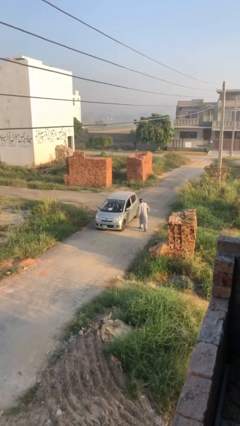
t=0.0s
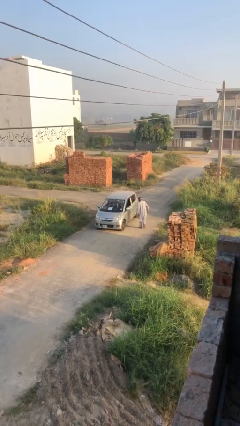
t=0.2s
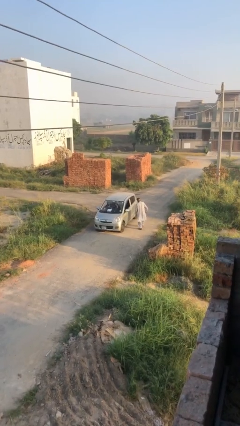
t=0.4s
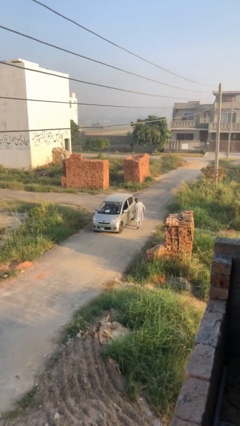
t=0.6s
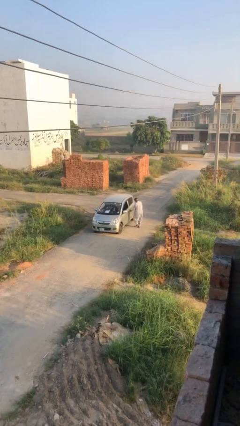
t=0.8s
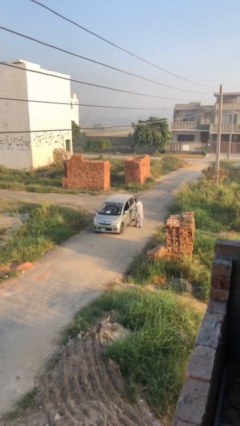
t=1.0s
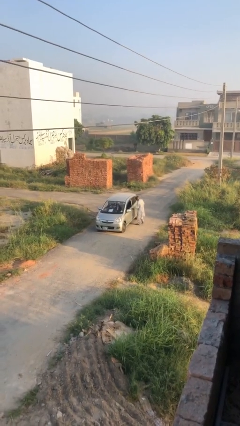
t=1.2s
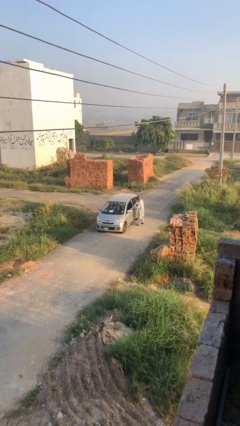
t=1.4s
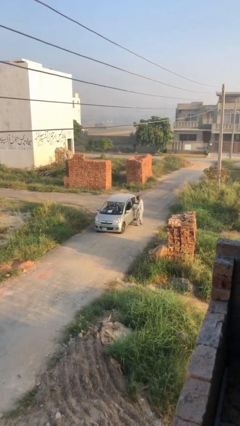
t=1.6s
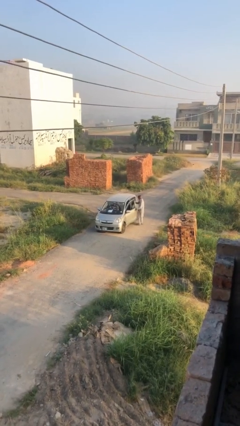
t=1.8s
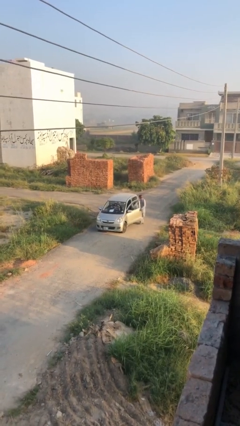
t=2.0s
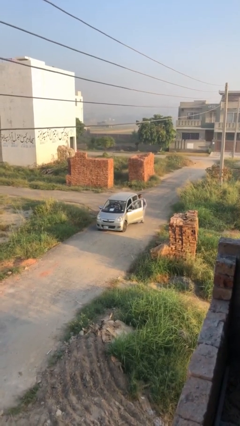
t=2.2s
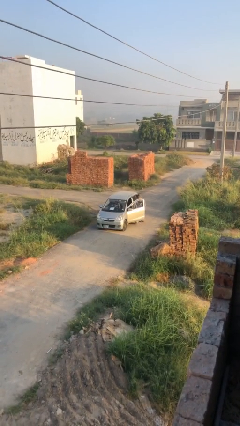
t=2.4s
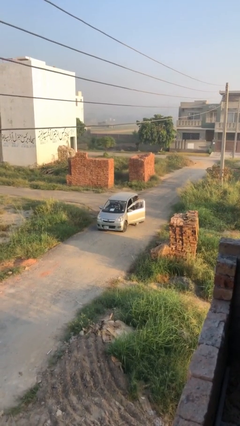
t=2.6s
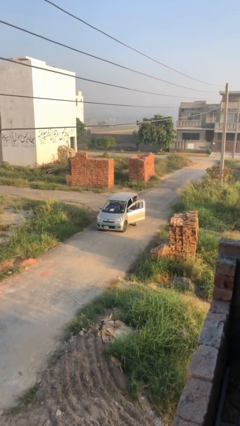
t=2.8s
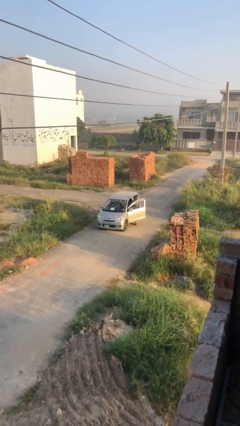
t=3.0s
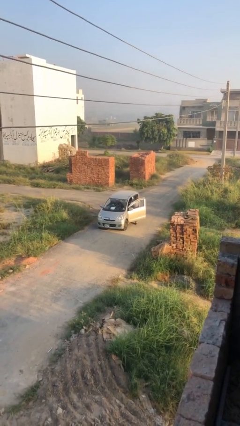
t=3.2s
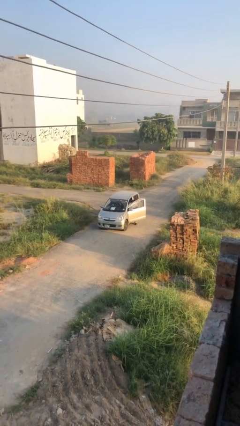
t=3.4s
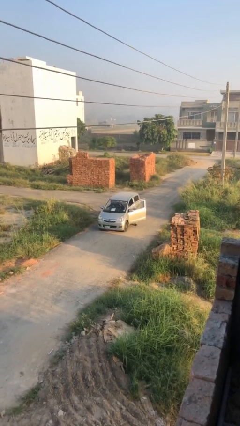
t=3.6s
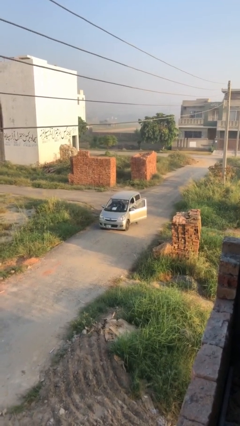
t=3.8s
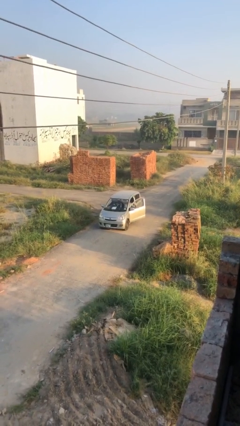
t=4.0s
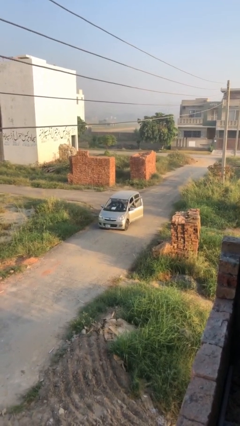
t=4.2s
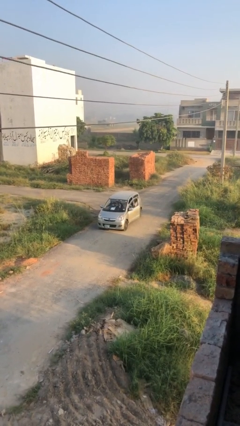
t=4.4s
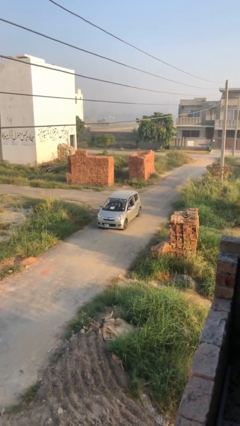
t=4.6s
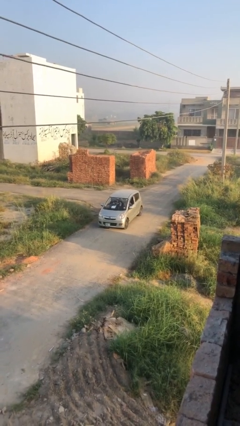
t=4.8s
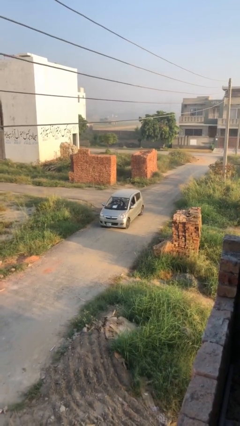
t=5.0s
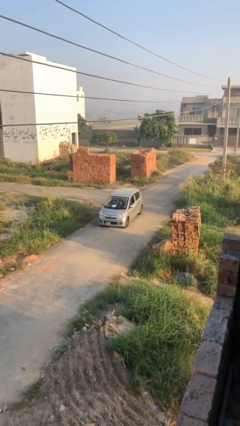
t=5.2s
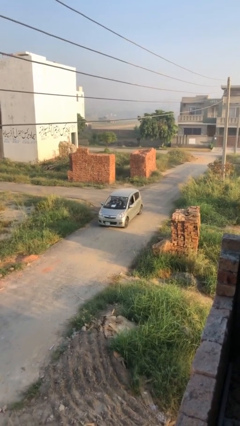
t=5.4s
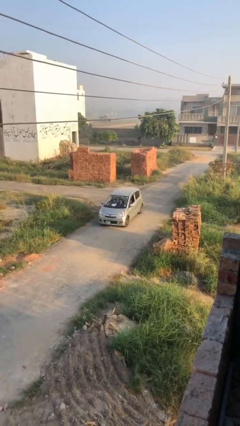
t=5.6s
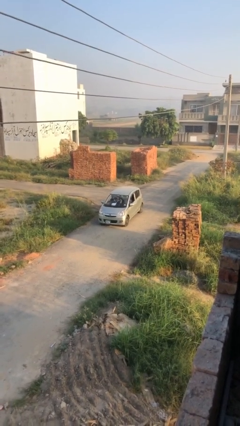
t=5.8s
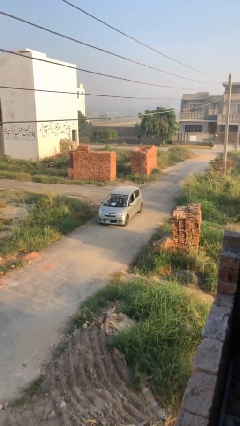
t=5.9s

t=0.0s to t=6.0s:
car picks up person

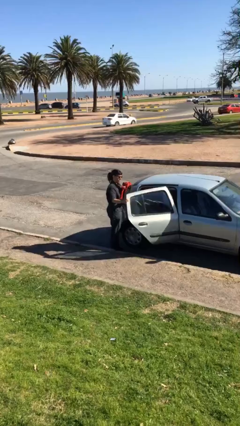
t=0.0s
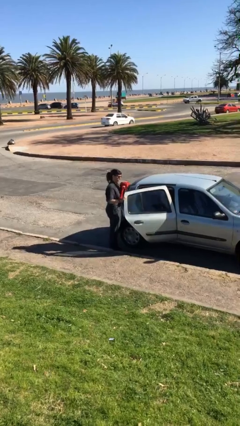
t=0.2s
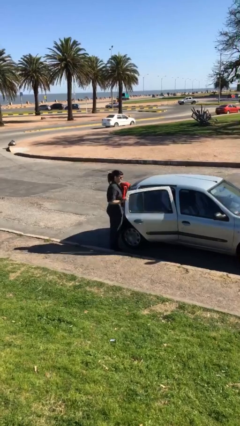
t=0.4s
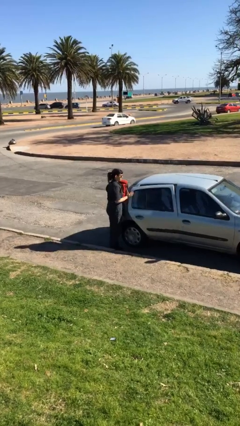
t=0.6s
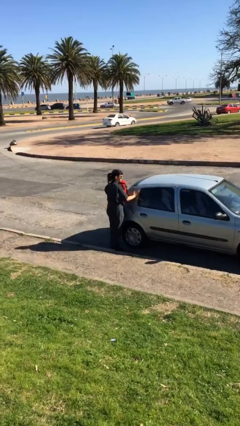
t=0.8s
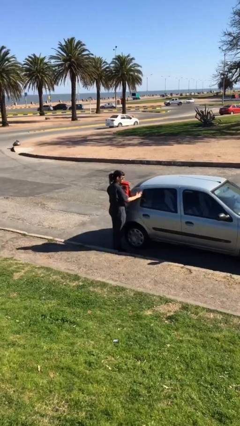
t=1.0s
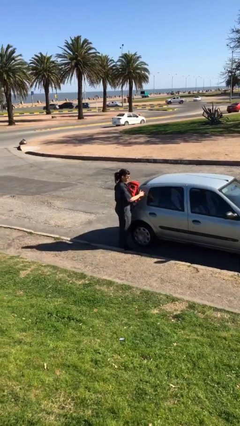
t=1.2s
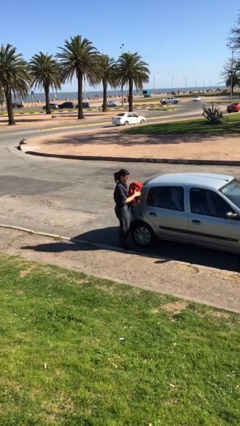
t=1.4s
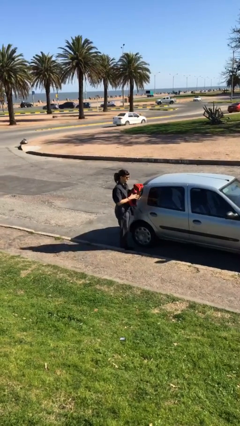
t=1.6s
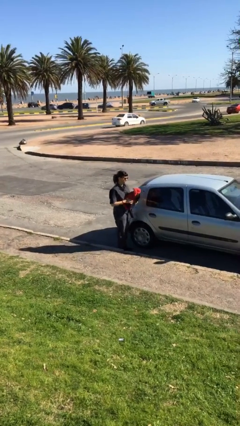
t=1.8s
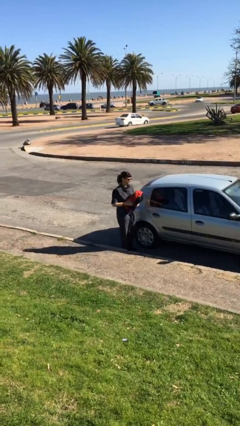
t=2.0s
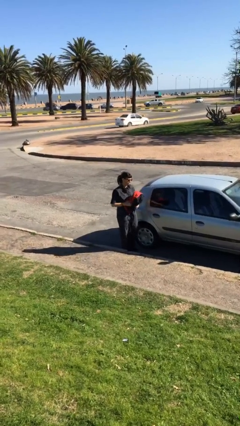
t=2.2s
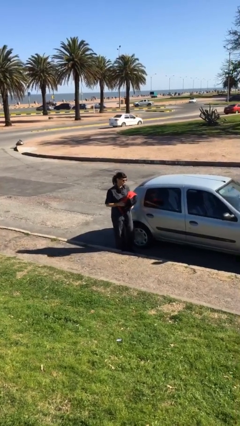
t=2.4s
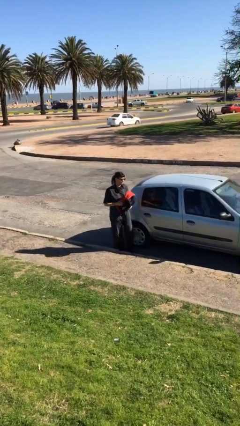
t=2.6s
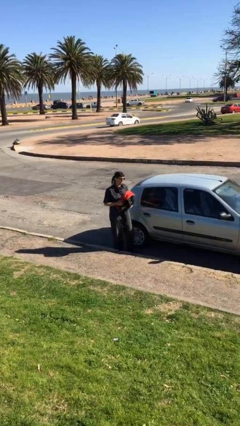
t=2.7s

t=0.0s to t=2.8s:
person closes car door

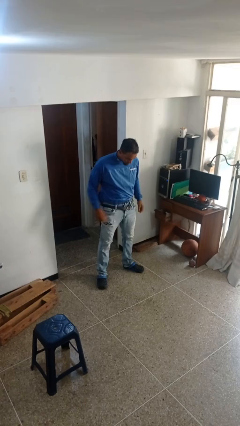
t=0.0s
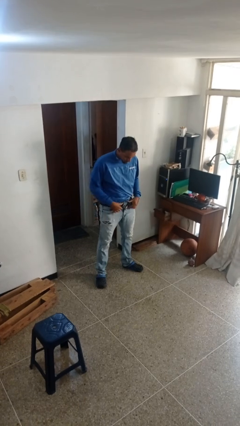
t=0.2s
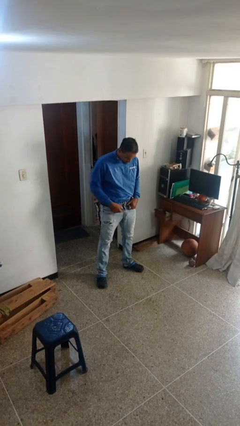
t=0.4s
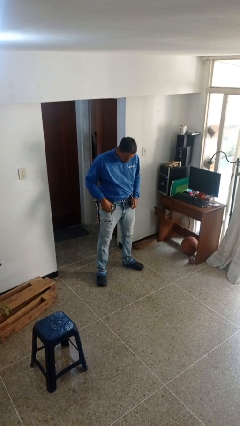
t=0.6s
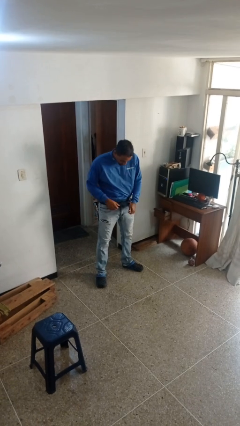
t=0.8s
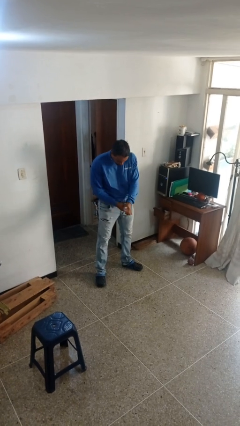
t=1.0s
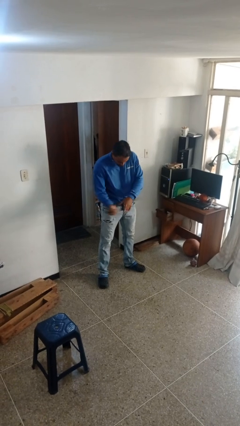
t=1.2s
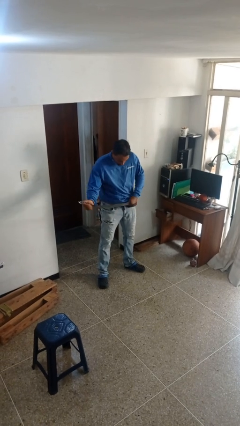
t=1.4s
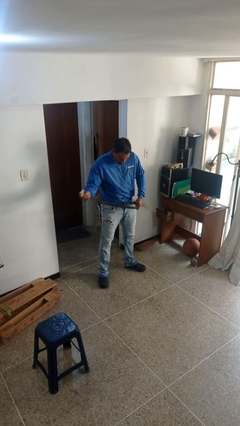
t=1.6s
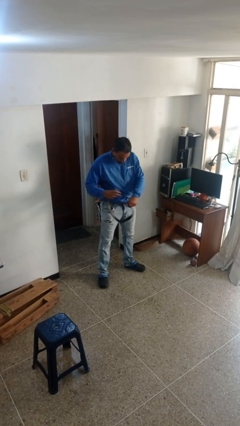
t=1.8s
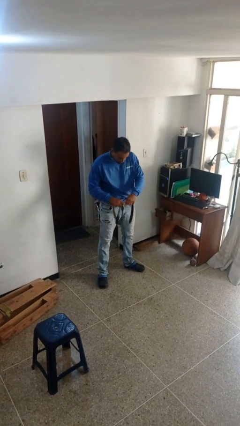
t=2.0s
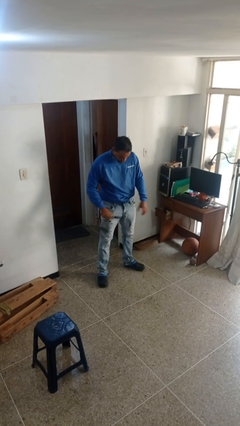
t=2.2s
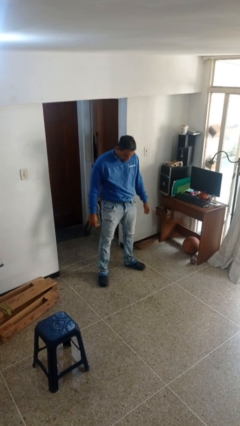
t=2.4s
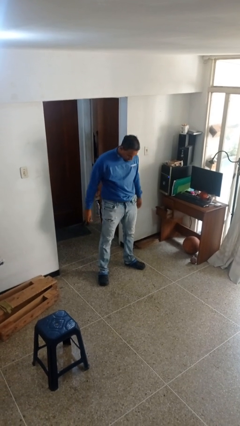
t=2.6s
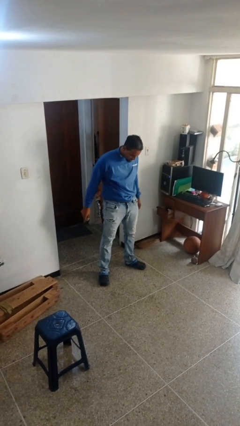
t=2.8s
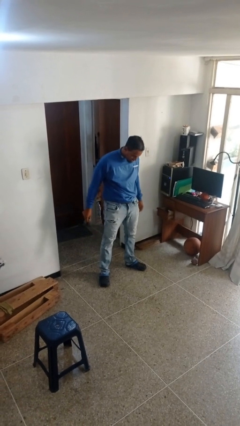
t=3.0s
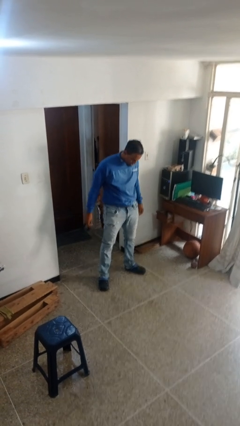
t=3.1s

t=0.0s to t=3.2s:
person takes off belt

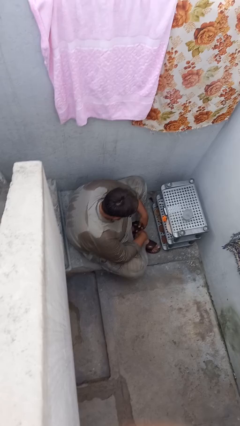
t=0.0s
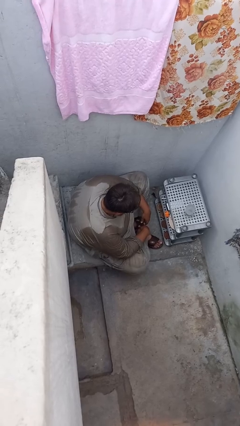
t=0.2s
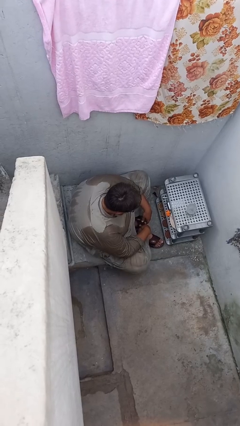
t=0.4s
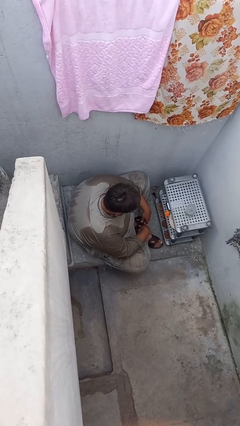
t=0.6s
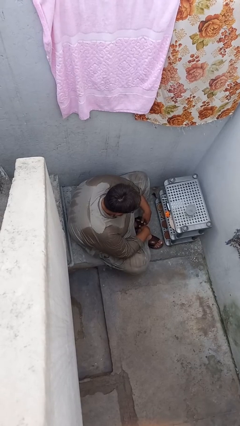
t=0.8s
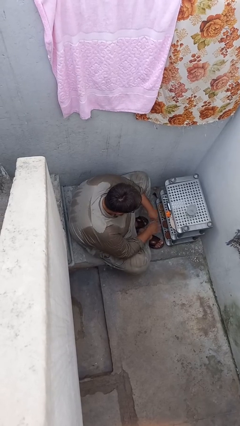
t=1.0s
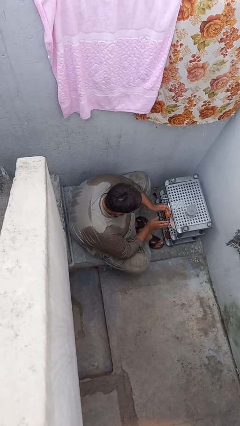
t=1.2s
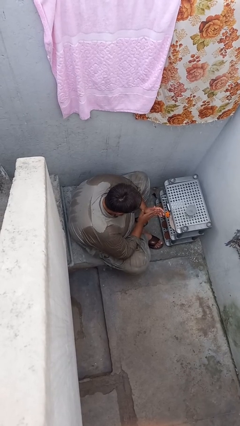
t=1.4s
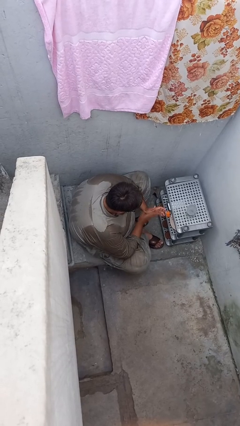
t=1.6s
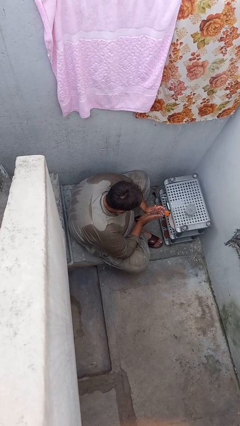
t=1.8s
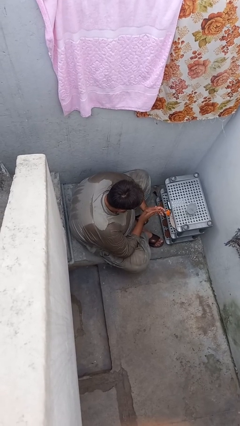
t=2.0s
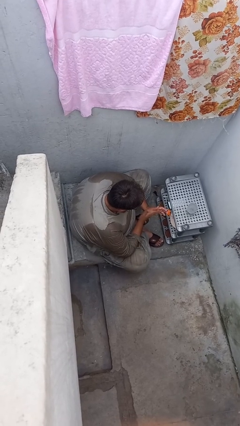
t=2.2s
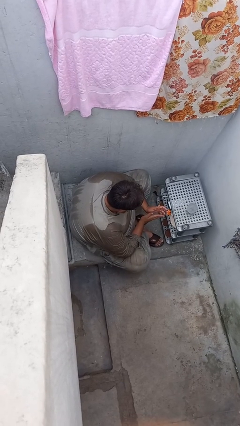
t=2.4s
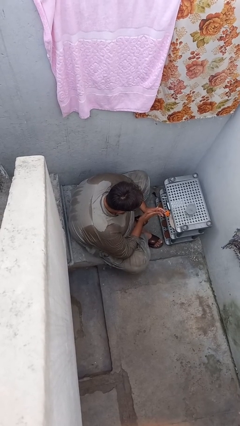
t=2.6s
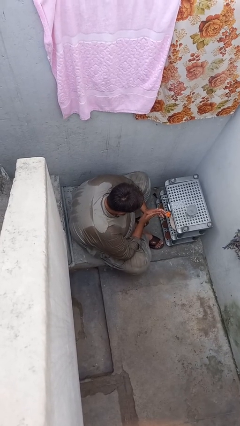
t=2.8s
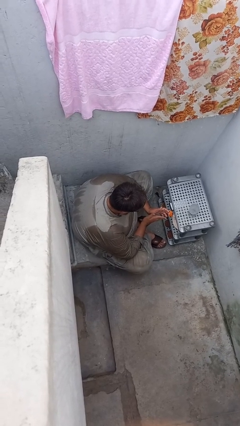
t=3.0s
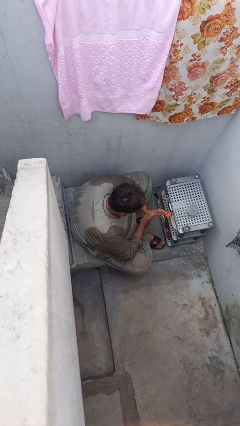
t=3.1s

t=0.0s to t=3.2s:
person claps hands

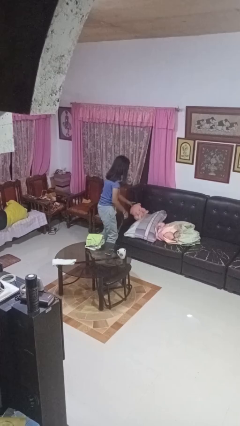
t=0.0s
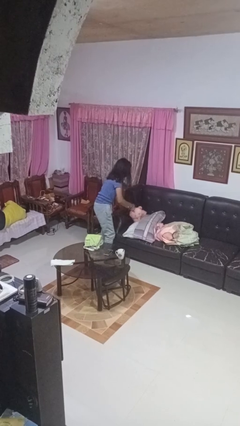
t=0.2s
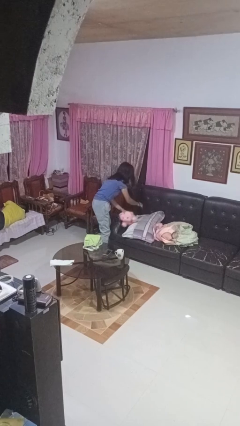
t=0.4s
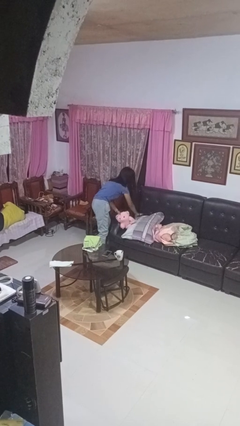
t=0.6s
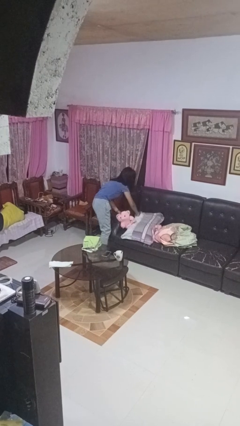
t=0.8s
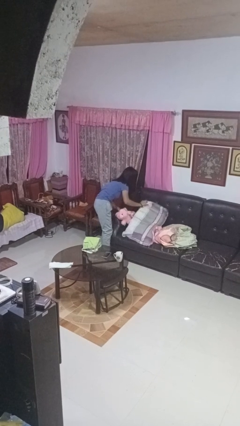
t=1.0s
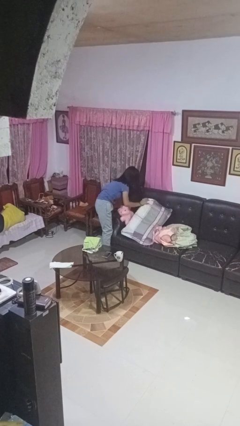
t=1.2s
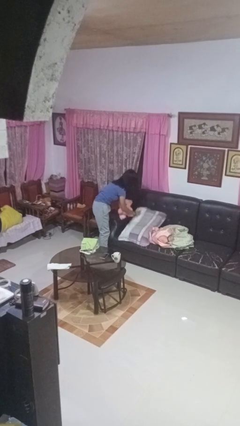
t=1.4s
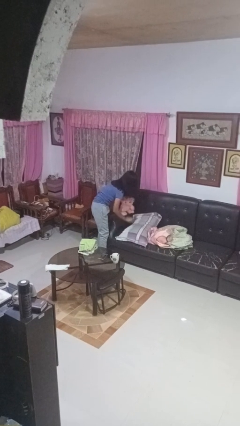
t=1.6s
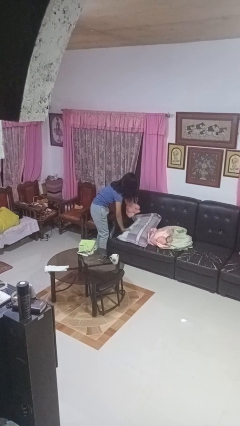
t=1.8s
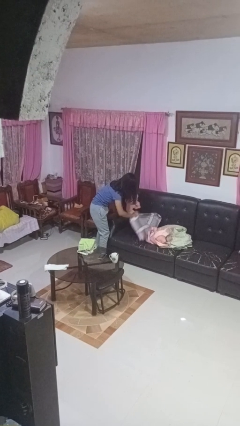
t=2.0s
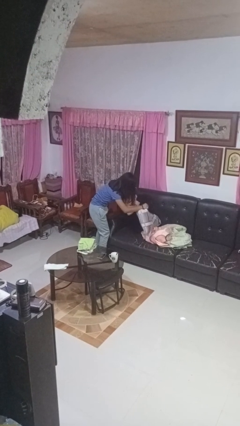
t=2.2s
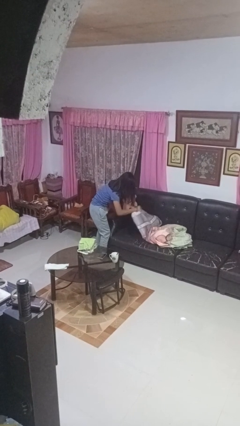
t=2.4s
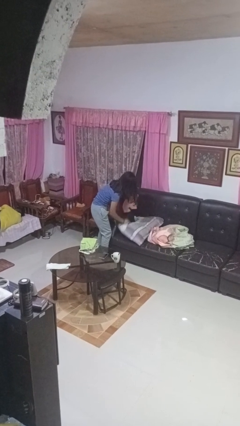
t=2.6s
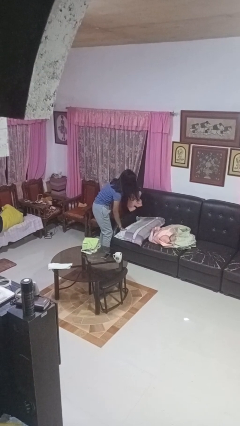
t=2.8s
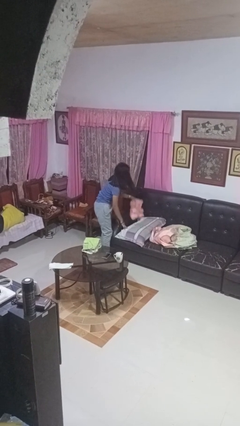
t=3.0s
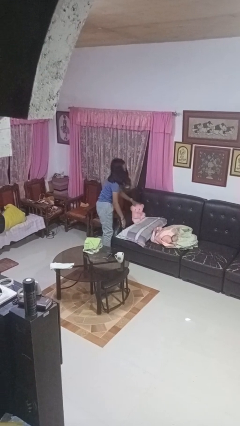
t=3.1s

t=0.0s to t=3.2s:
person searches in couch
